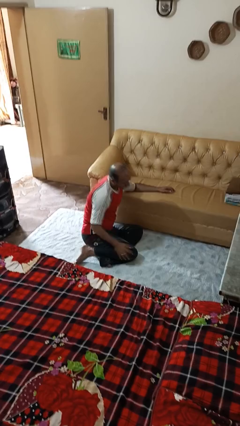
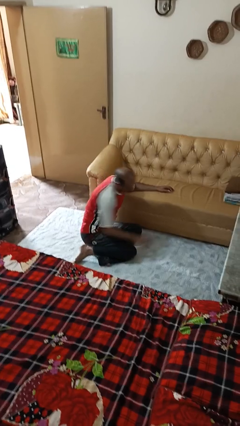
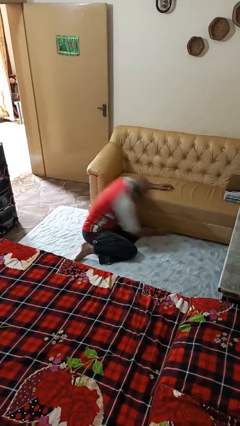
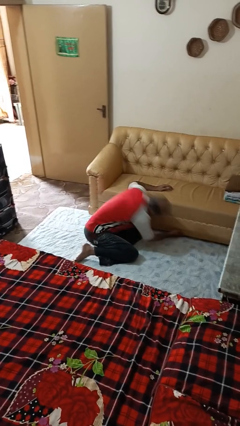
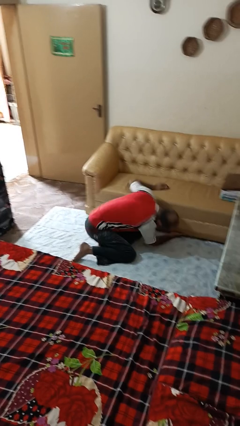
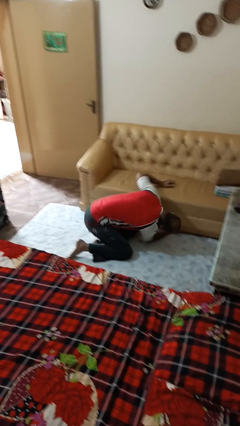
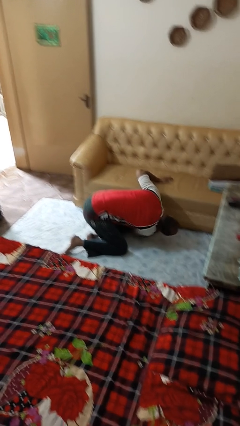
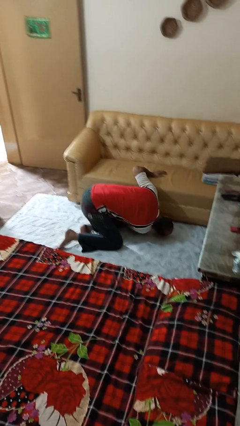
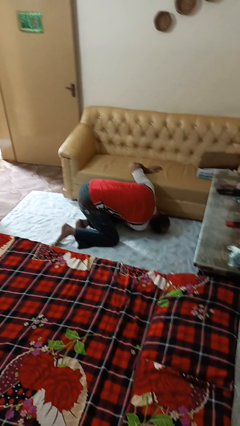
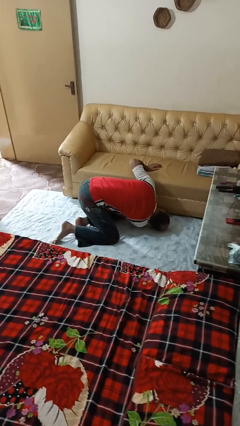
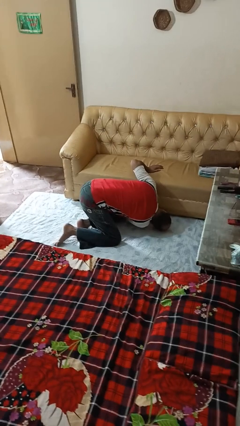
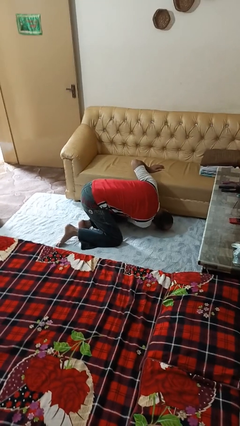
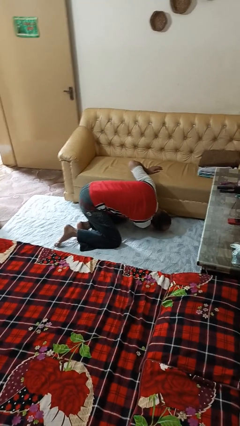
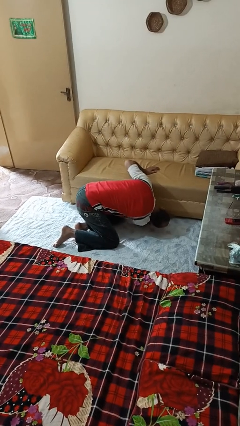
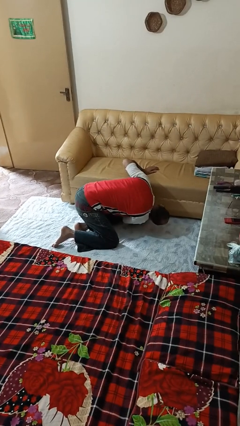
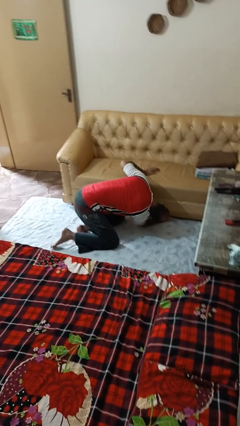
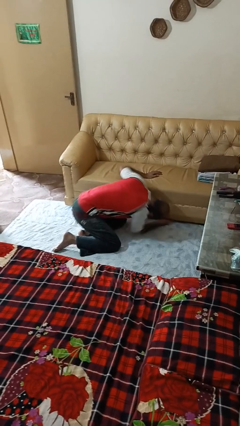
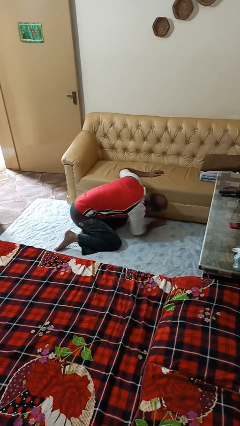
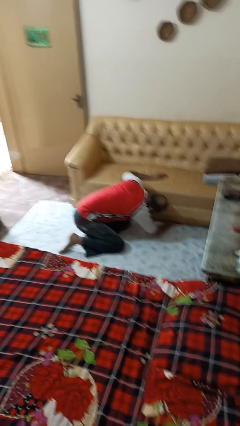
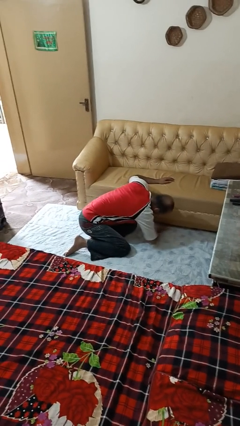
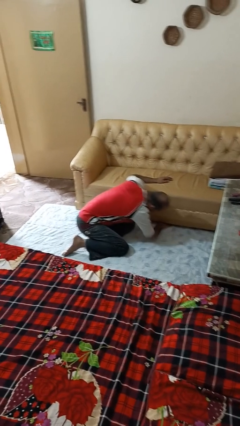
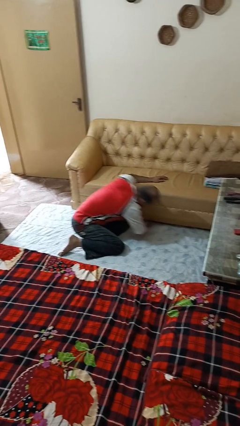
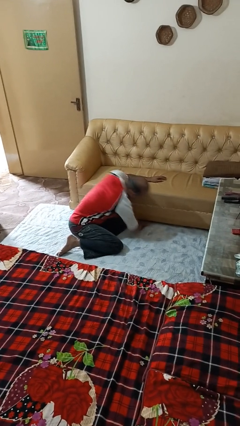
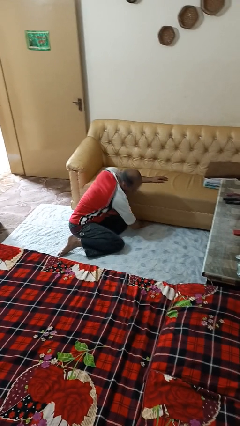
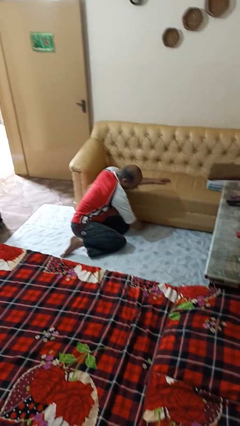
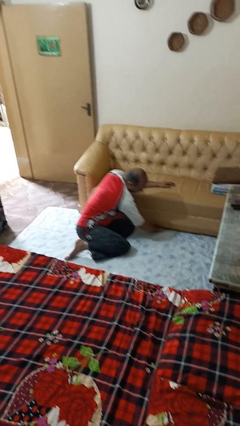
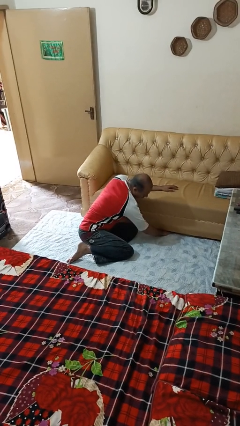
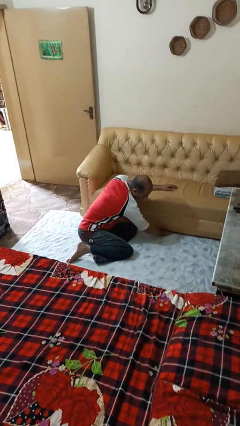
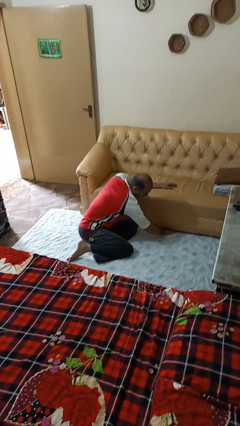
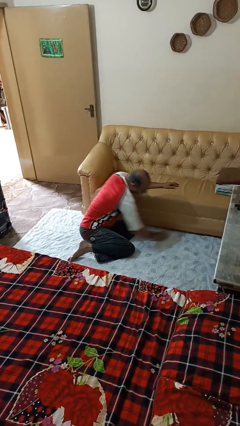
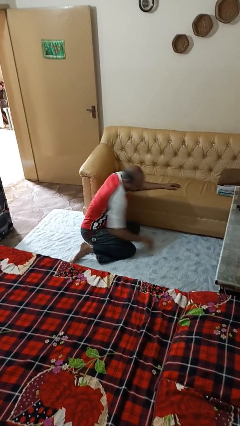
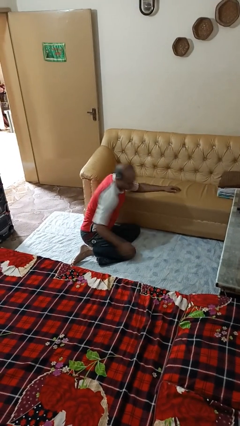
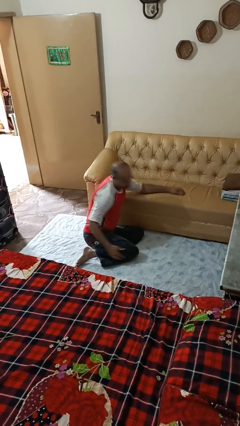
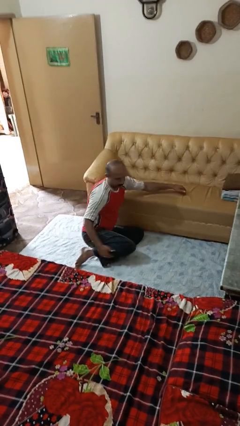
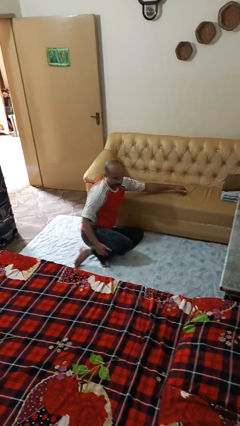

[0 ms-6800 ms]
person searches under couch

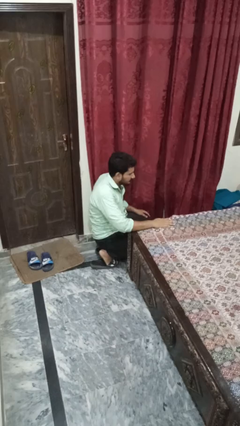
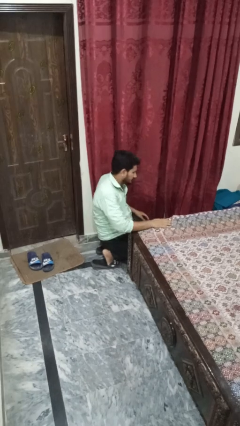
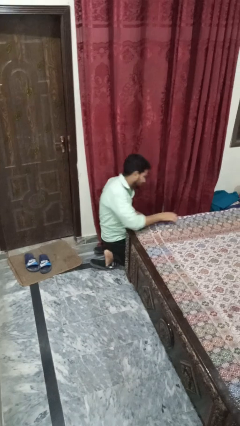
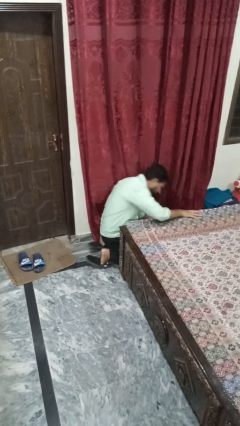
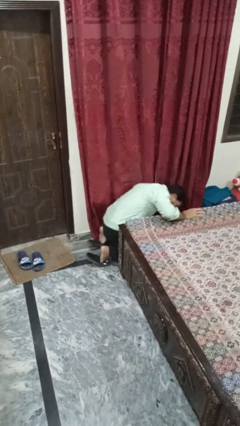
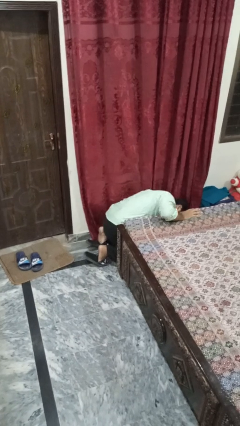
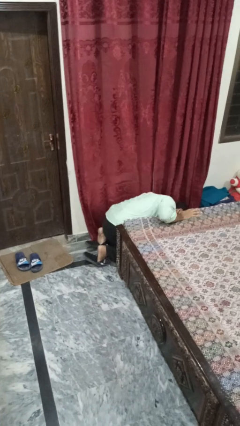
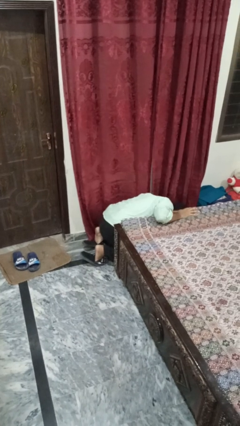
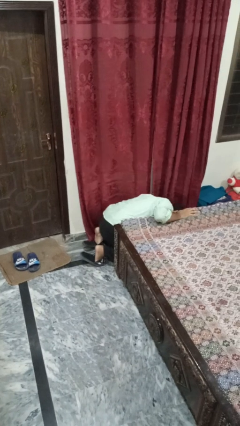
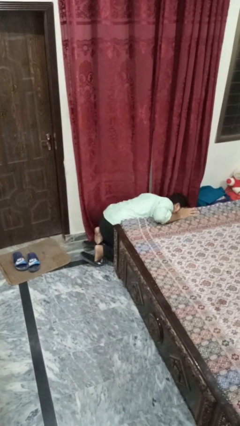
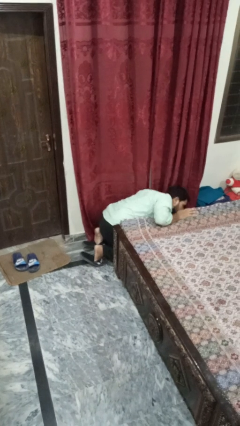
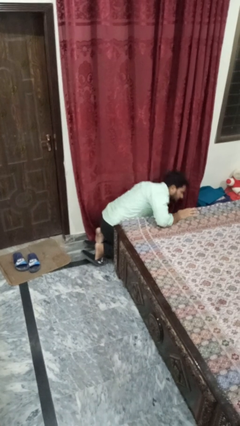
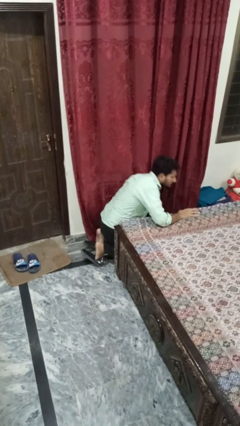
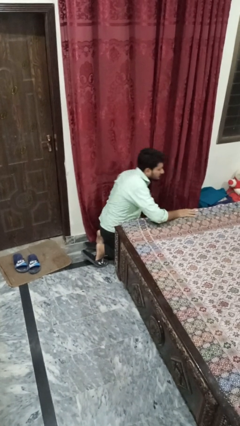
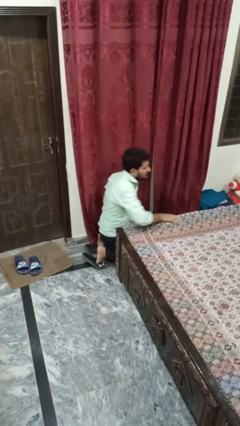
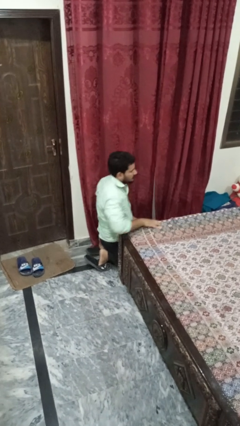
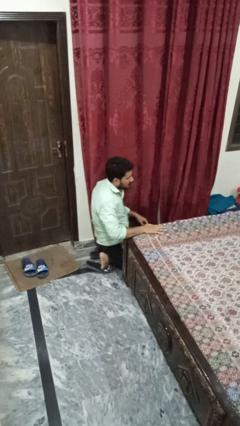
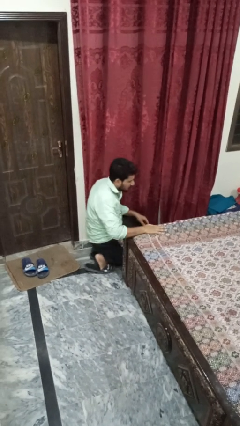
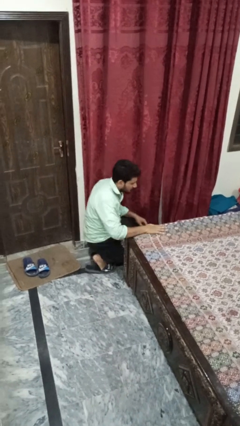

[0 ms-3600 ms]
person searches under bed

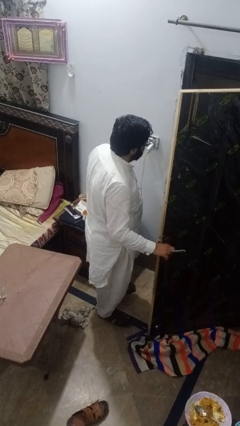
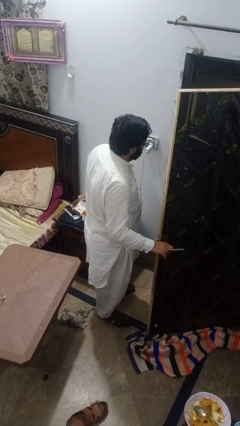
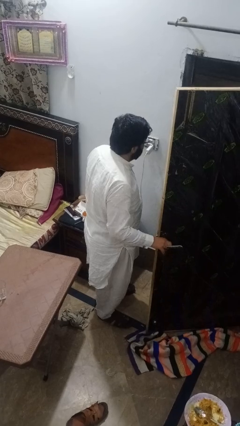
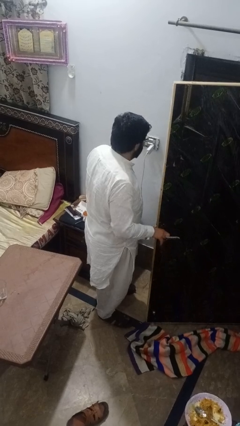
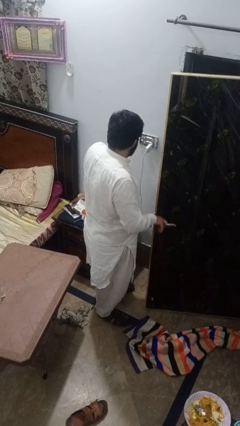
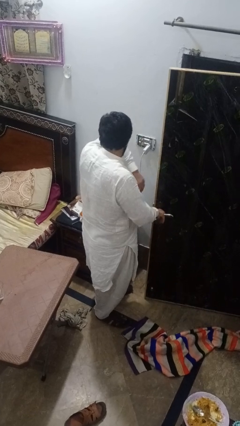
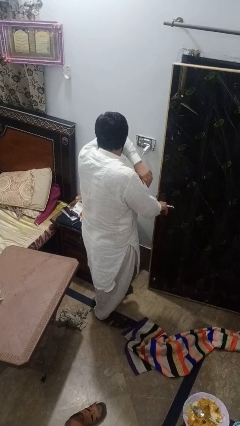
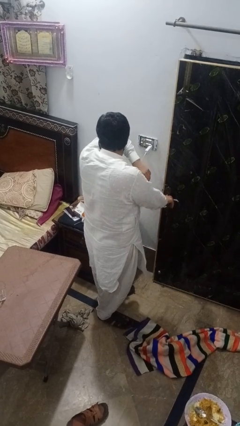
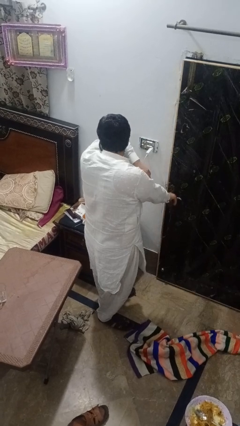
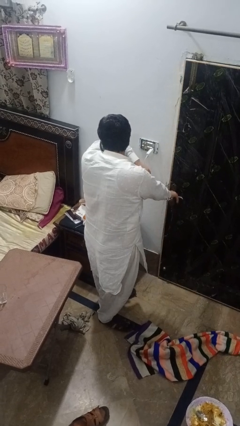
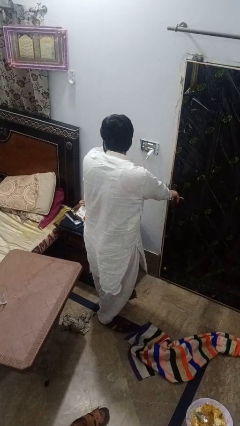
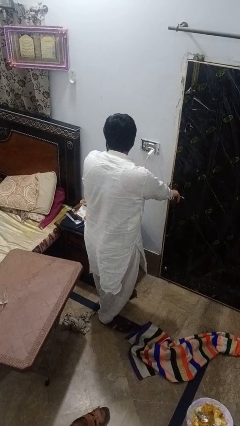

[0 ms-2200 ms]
person closes gate

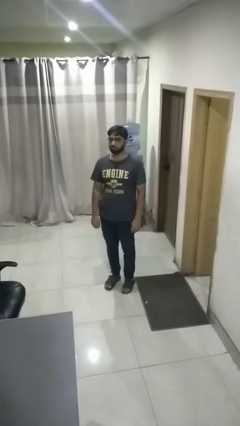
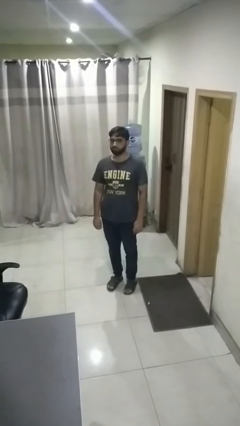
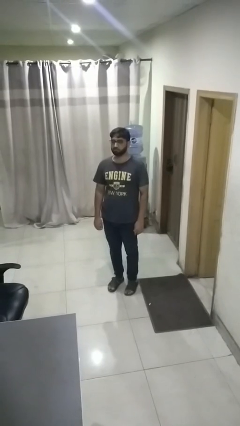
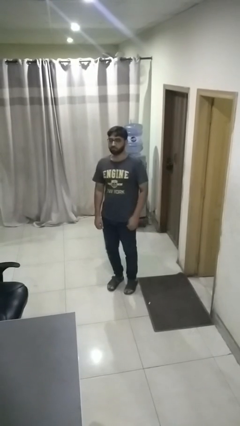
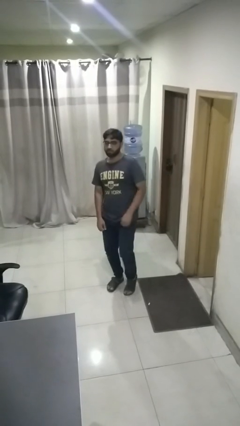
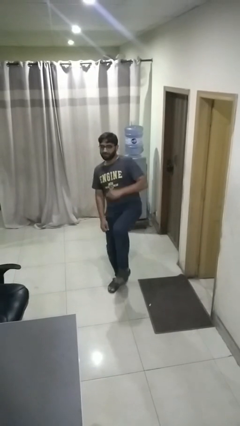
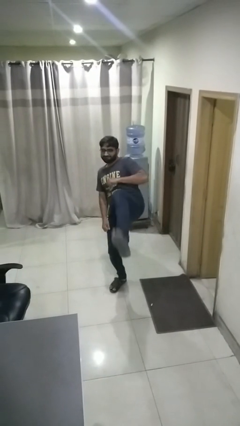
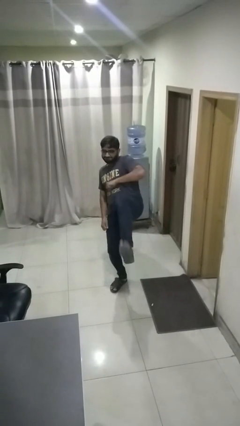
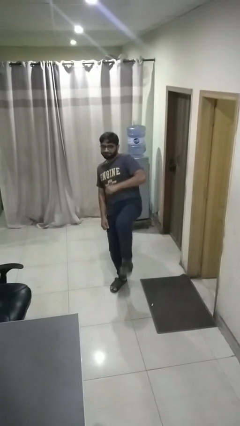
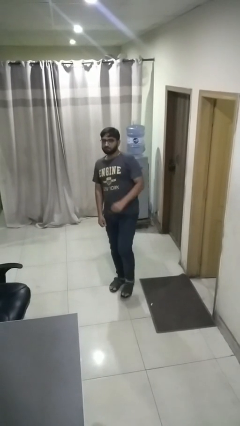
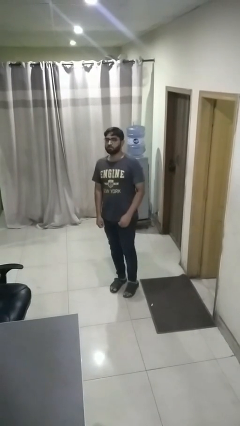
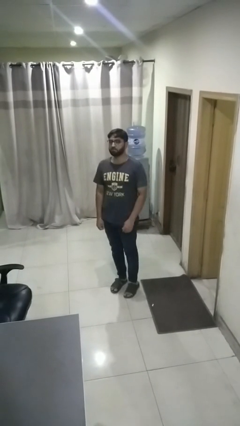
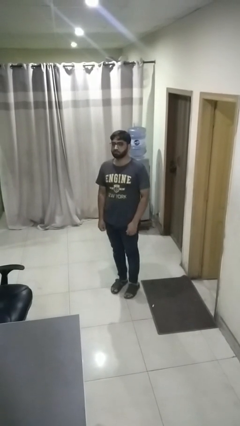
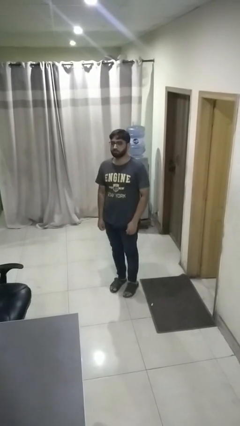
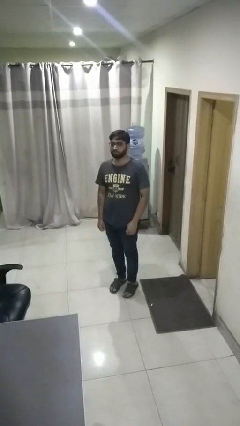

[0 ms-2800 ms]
person karate kicks

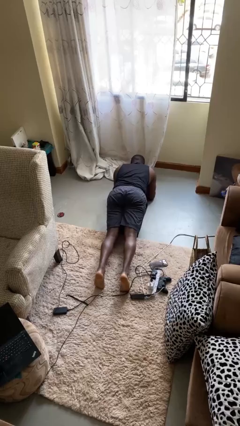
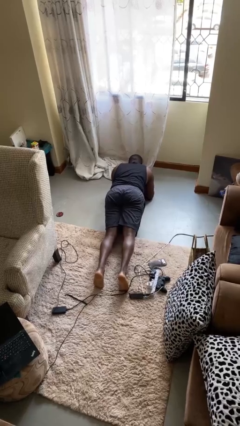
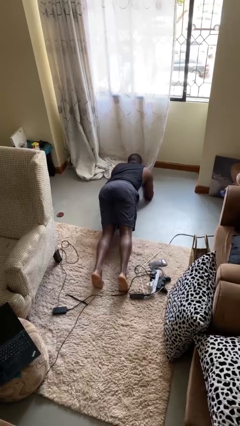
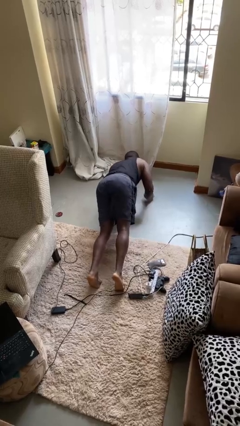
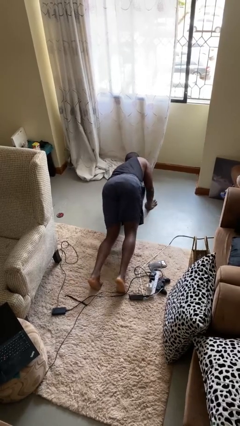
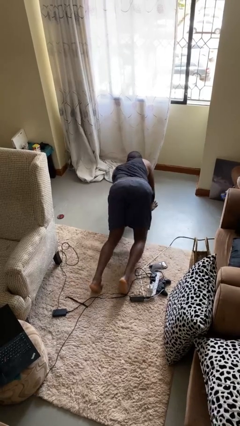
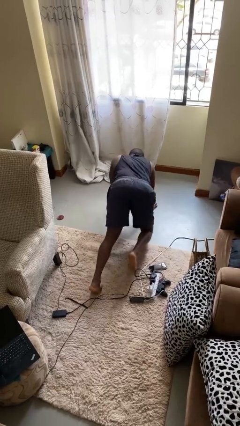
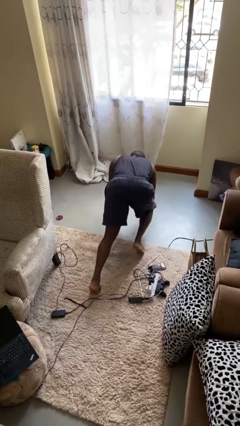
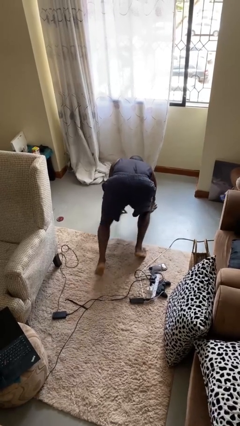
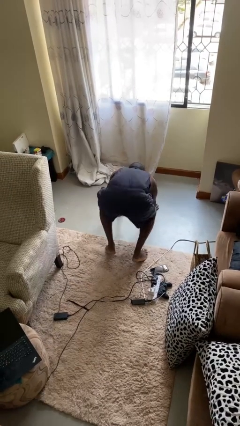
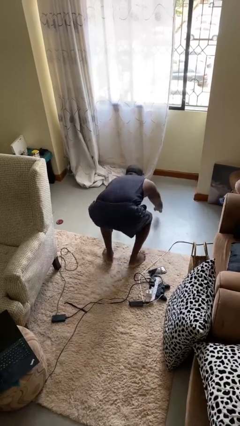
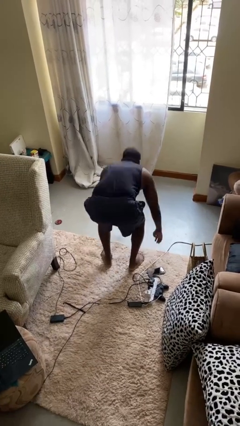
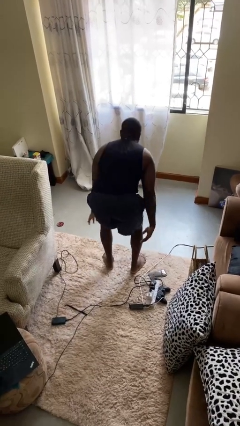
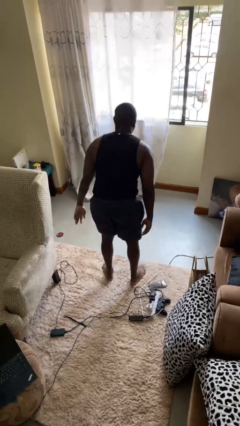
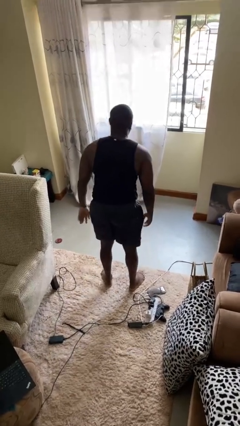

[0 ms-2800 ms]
person stands up from floor
